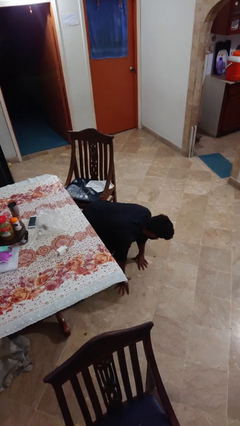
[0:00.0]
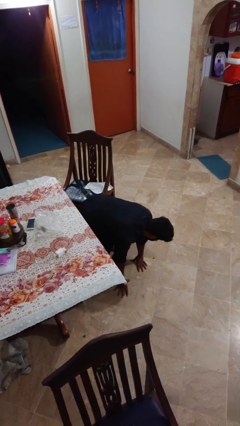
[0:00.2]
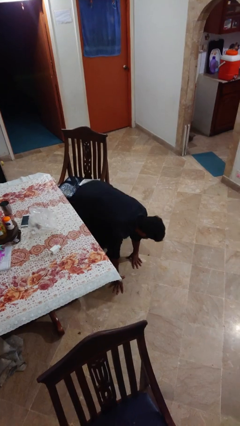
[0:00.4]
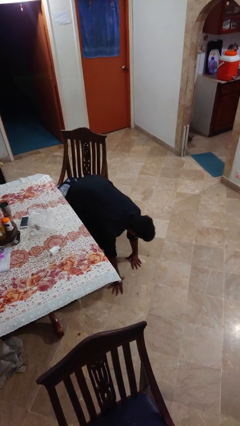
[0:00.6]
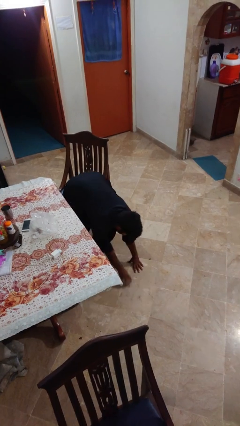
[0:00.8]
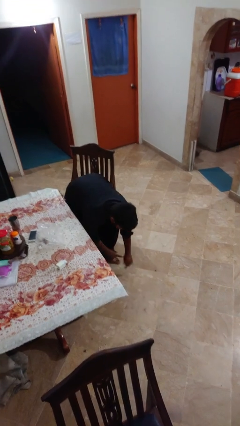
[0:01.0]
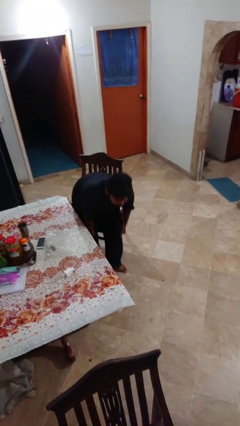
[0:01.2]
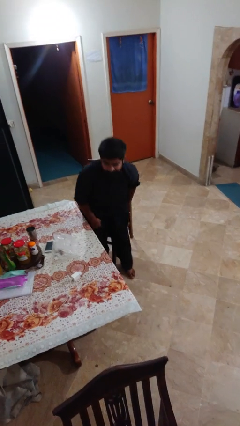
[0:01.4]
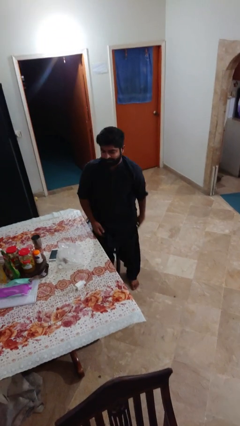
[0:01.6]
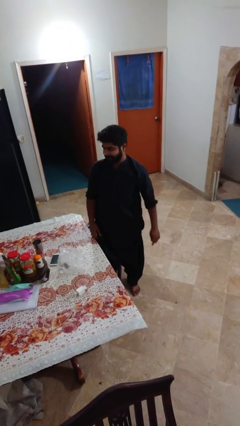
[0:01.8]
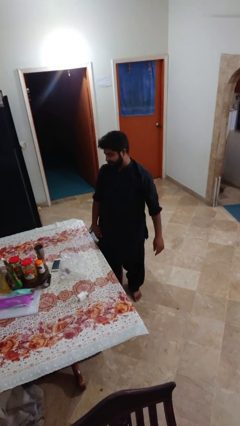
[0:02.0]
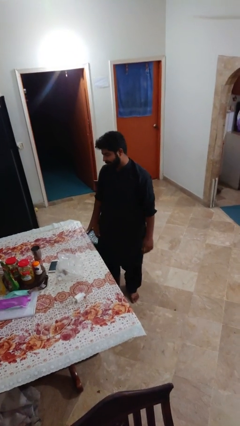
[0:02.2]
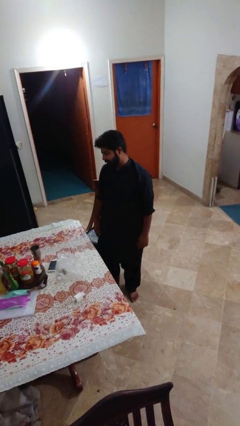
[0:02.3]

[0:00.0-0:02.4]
person stands up from floor

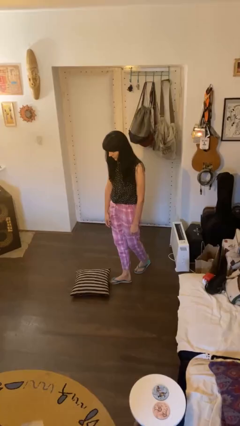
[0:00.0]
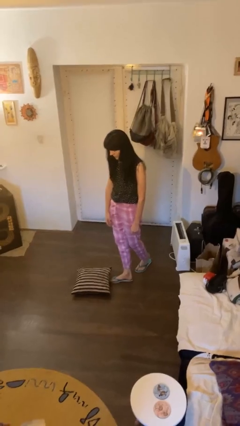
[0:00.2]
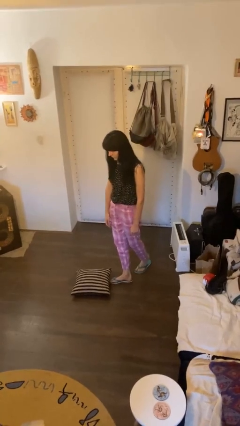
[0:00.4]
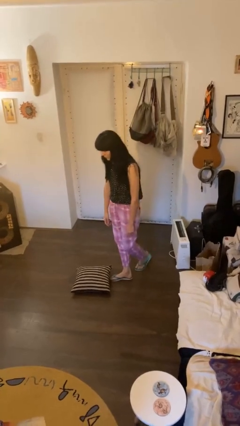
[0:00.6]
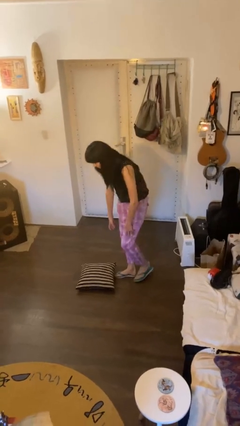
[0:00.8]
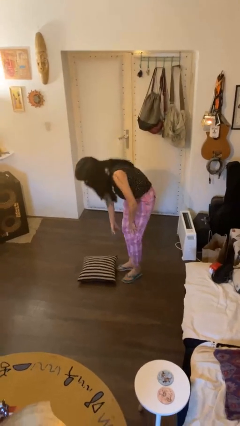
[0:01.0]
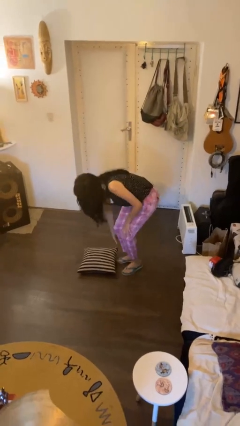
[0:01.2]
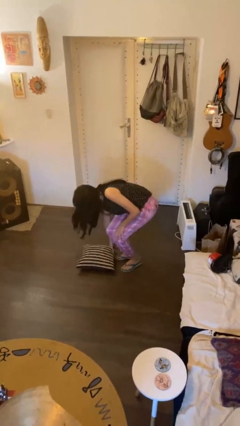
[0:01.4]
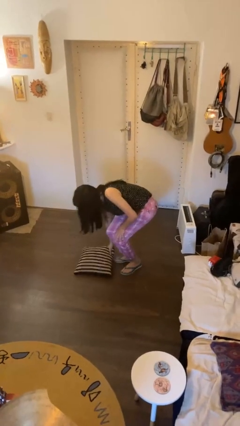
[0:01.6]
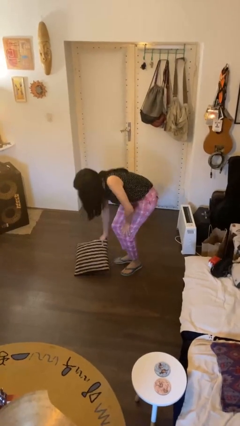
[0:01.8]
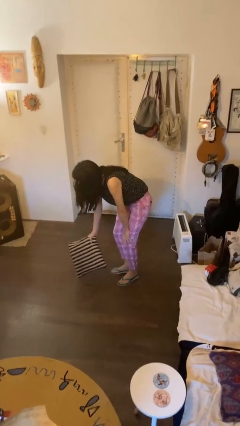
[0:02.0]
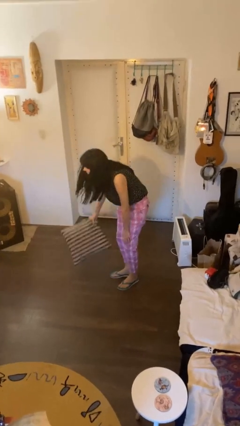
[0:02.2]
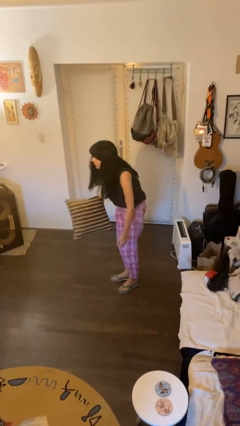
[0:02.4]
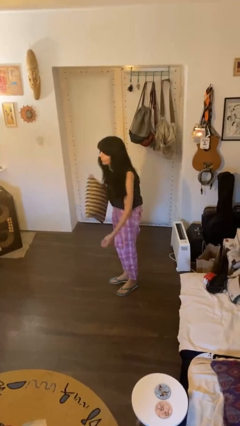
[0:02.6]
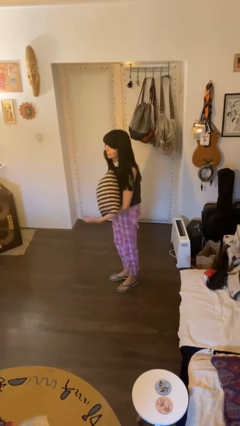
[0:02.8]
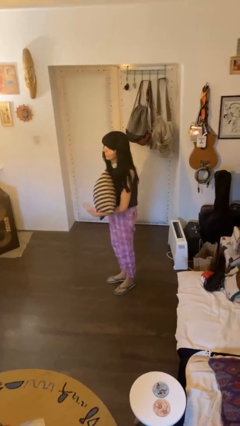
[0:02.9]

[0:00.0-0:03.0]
person picks up object from floor

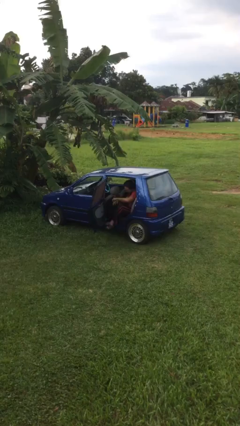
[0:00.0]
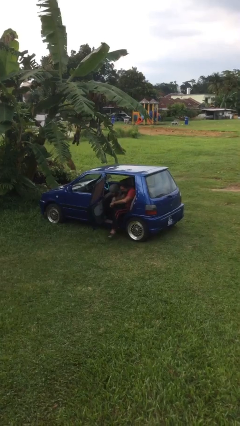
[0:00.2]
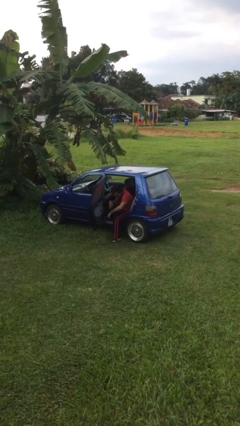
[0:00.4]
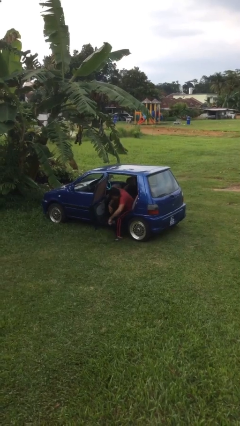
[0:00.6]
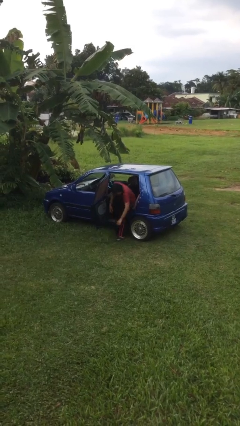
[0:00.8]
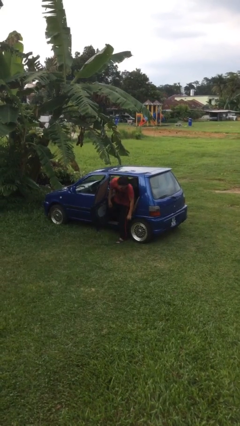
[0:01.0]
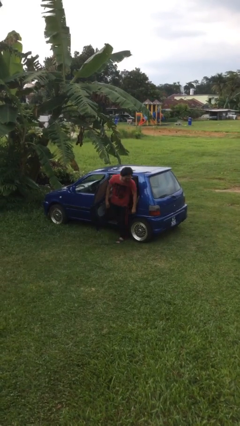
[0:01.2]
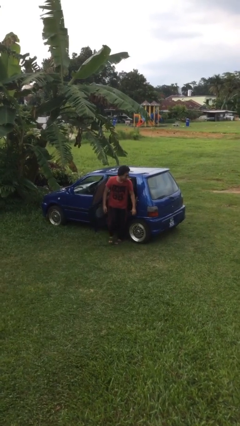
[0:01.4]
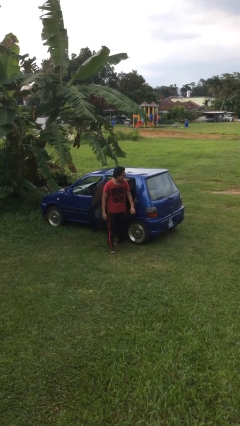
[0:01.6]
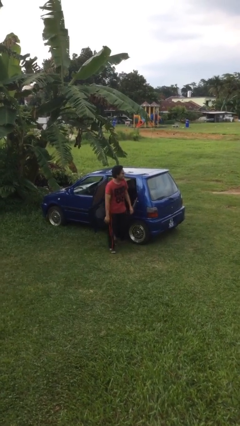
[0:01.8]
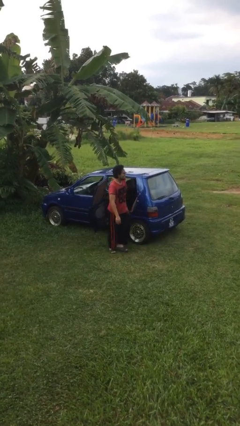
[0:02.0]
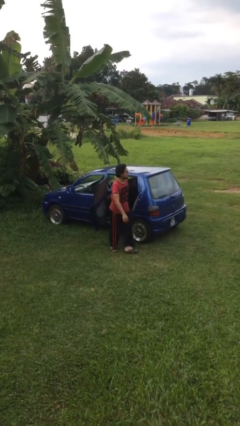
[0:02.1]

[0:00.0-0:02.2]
person exits car

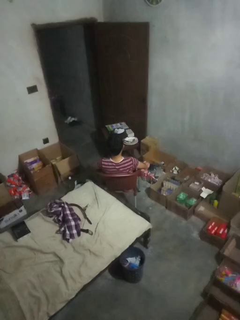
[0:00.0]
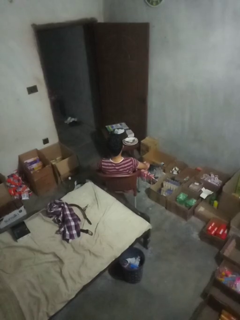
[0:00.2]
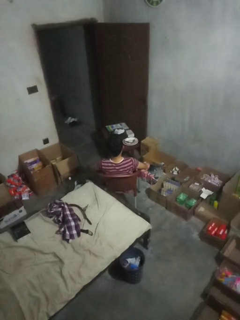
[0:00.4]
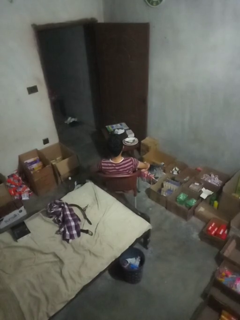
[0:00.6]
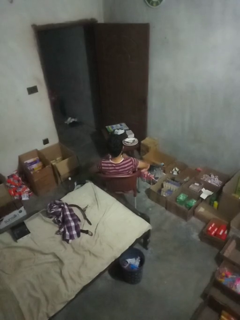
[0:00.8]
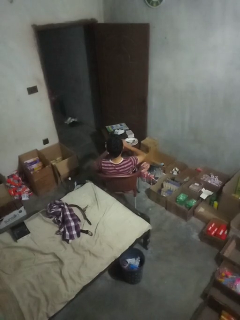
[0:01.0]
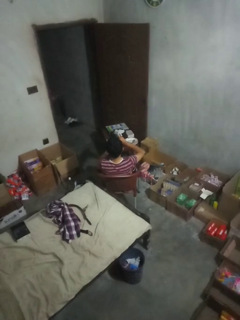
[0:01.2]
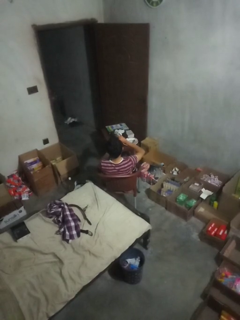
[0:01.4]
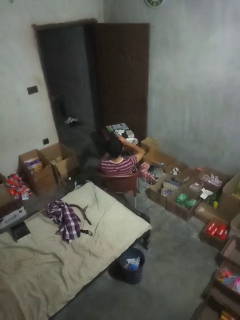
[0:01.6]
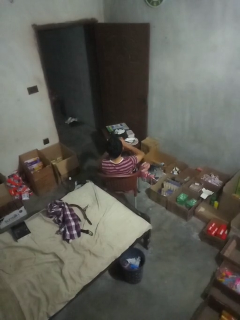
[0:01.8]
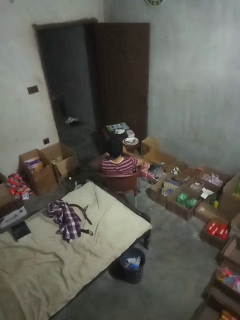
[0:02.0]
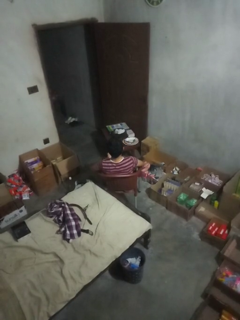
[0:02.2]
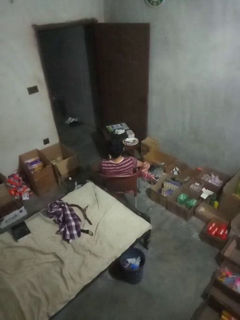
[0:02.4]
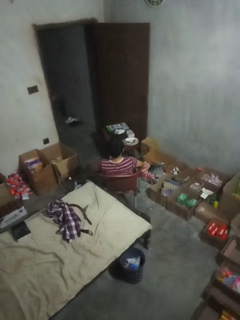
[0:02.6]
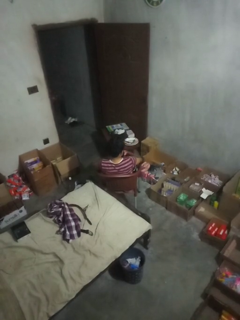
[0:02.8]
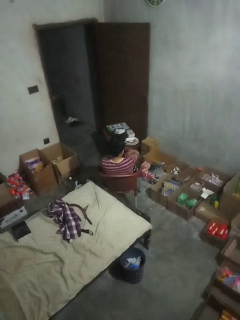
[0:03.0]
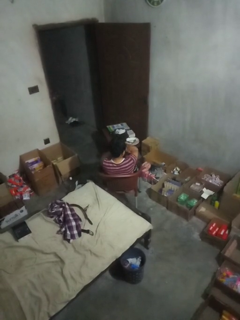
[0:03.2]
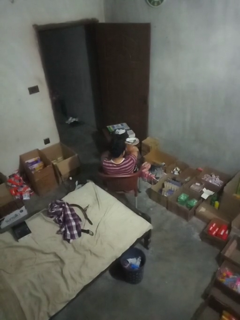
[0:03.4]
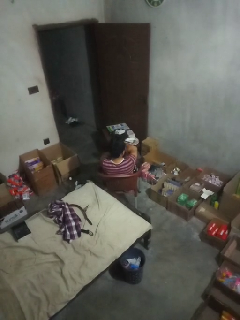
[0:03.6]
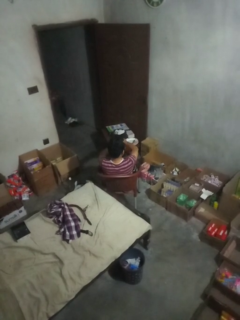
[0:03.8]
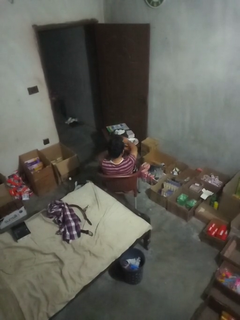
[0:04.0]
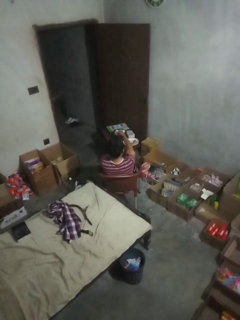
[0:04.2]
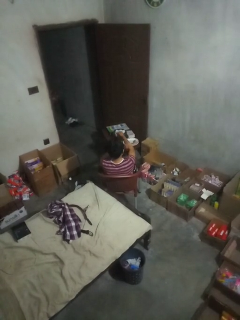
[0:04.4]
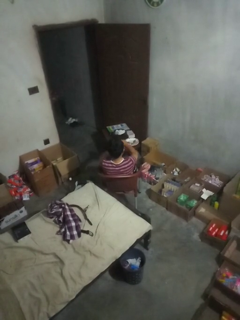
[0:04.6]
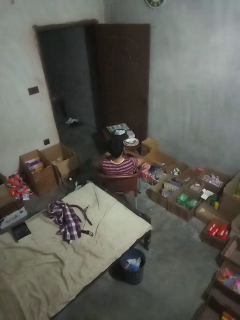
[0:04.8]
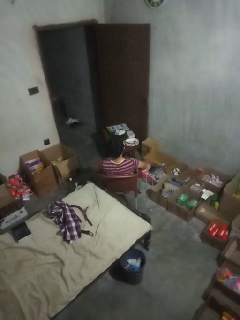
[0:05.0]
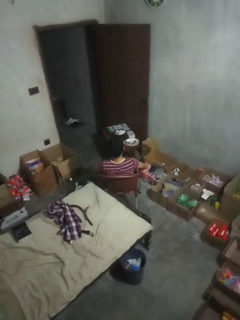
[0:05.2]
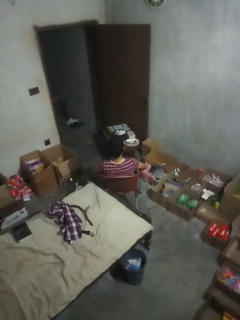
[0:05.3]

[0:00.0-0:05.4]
person applies sunscreen

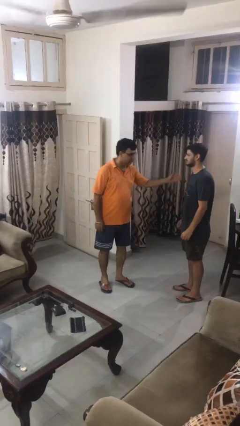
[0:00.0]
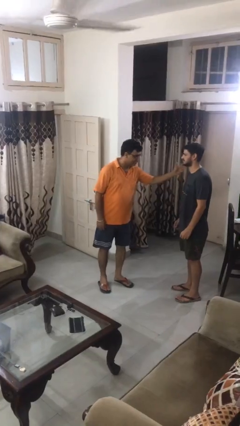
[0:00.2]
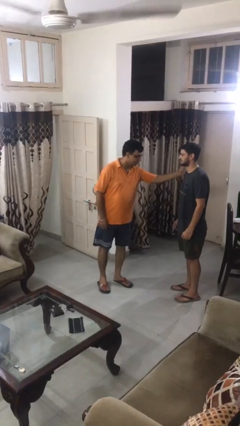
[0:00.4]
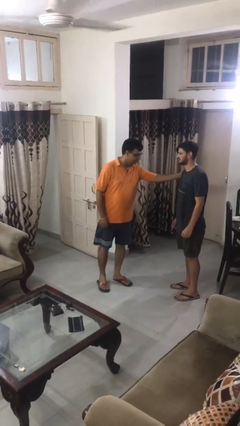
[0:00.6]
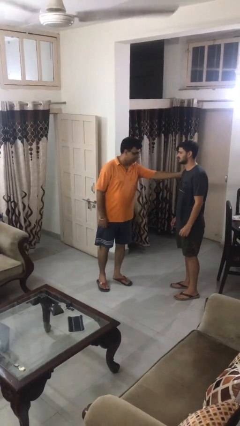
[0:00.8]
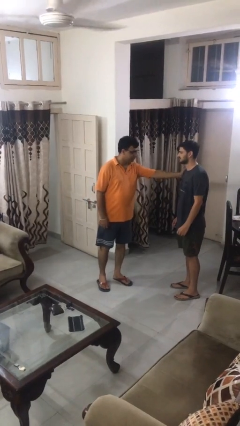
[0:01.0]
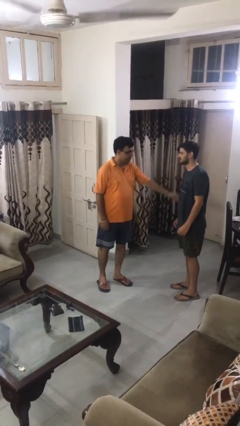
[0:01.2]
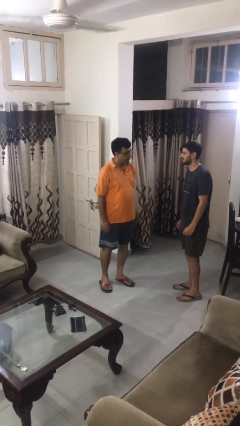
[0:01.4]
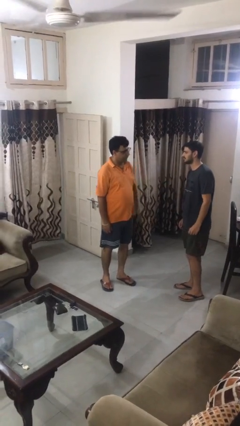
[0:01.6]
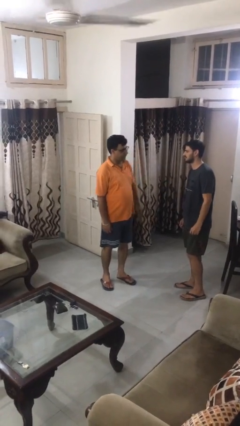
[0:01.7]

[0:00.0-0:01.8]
person pounds shoulders of person

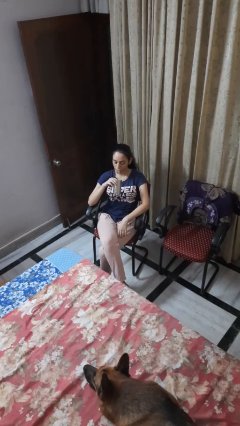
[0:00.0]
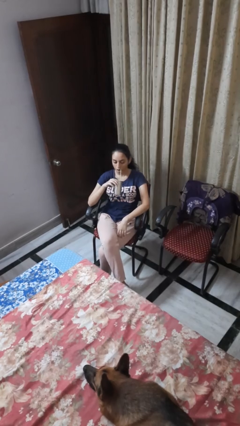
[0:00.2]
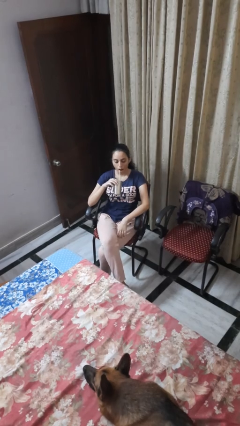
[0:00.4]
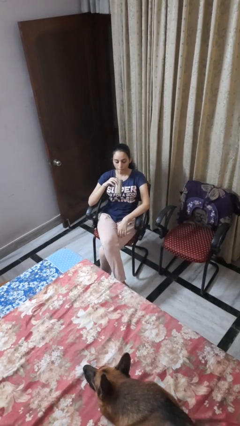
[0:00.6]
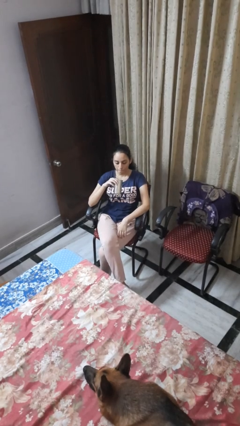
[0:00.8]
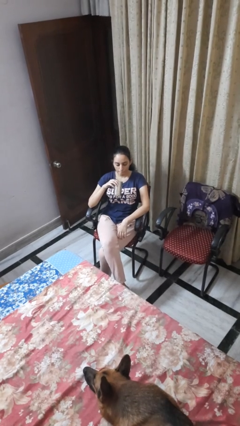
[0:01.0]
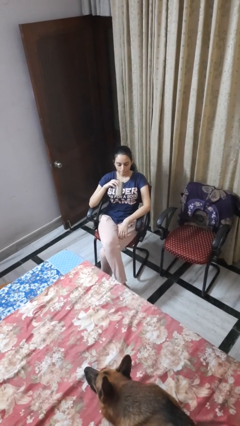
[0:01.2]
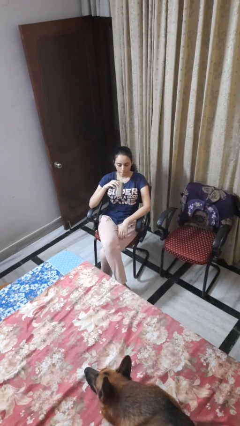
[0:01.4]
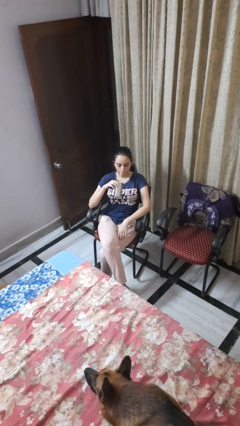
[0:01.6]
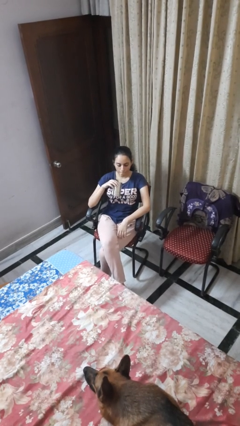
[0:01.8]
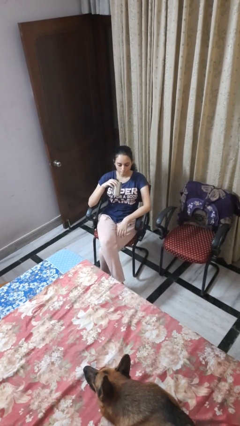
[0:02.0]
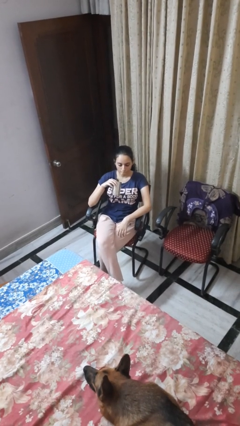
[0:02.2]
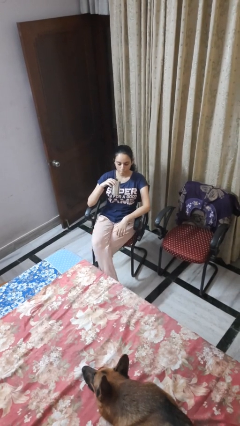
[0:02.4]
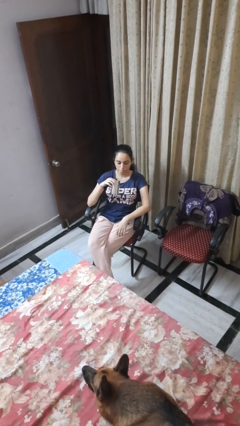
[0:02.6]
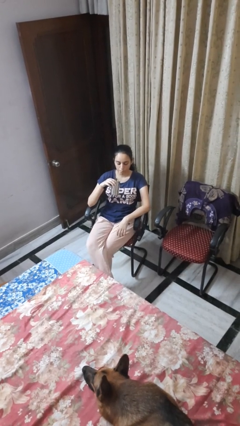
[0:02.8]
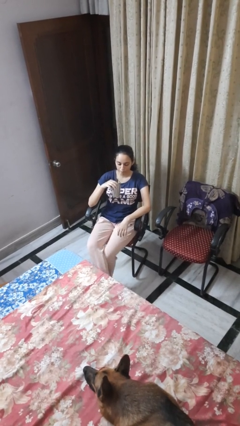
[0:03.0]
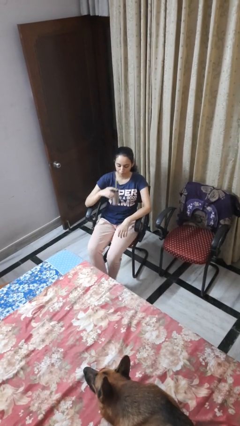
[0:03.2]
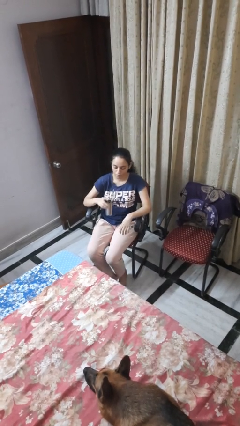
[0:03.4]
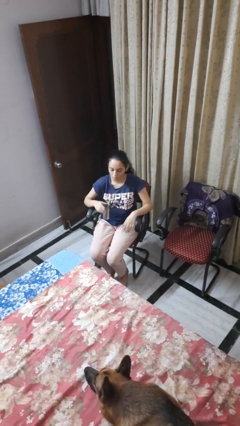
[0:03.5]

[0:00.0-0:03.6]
person drinks from straw
